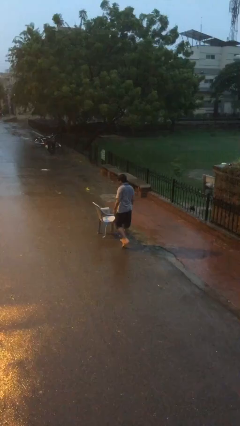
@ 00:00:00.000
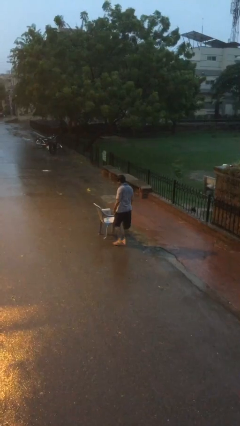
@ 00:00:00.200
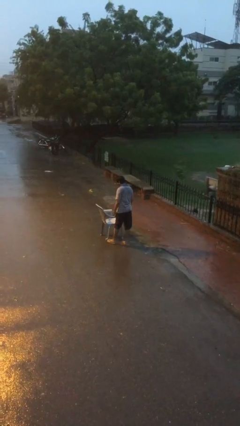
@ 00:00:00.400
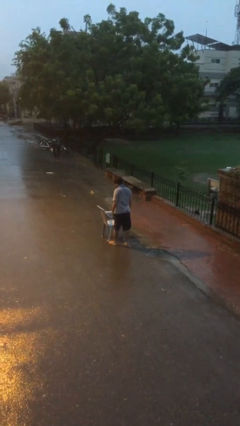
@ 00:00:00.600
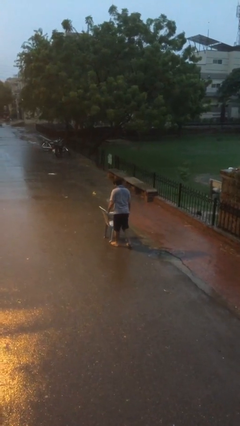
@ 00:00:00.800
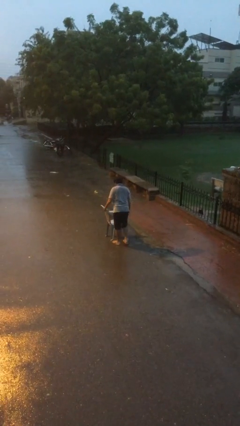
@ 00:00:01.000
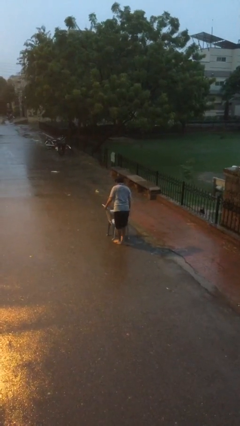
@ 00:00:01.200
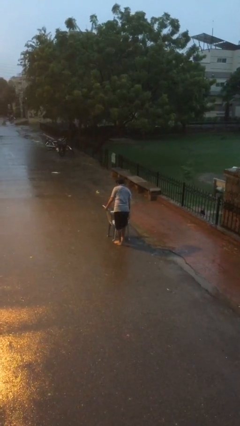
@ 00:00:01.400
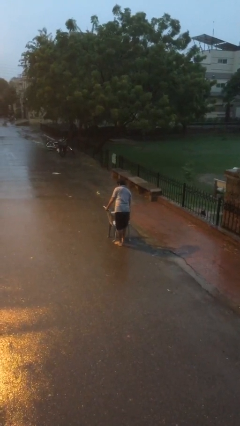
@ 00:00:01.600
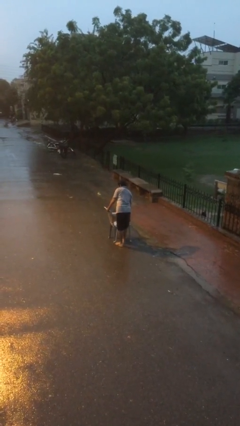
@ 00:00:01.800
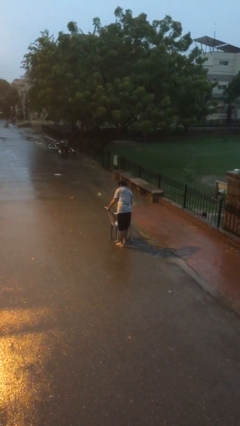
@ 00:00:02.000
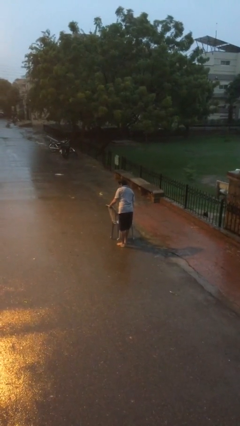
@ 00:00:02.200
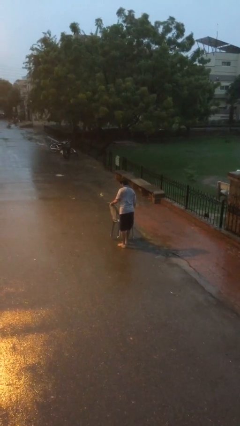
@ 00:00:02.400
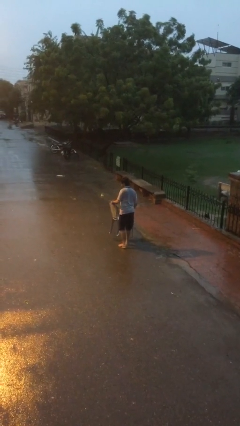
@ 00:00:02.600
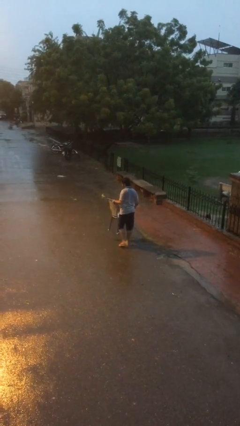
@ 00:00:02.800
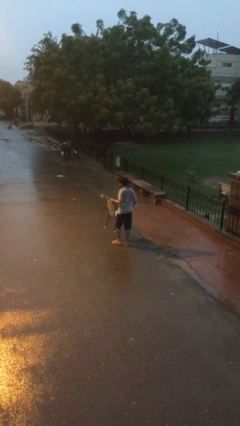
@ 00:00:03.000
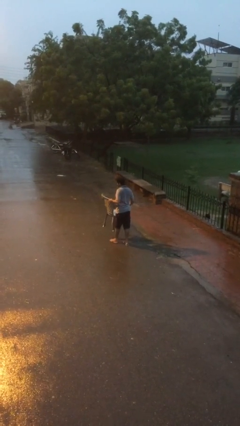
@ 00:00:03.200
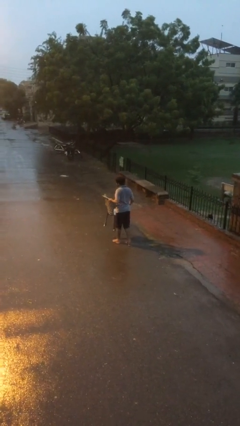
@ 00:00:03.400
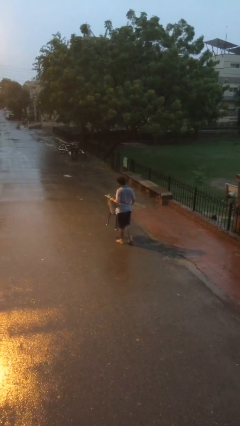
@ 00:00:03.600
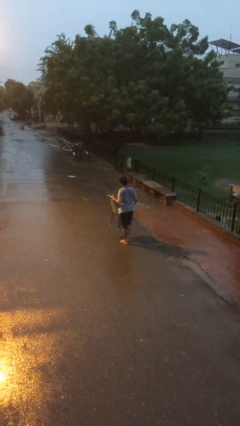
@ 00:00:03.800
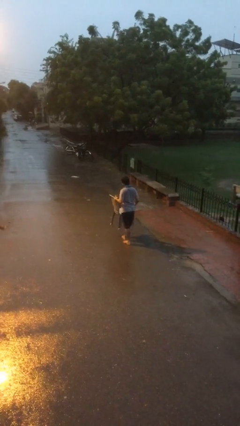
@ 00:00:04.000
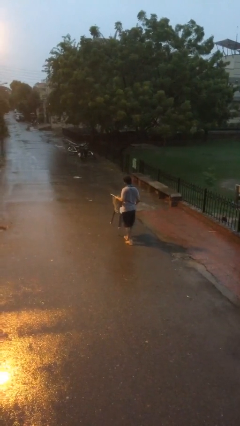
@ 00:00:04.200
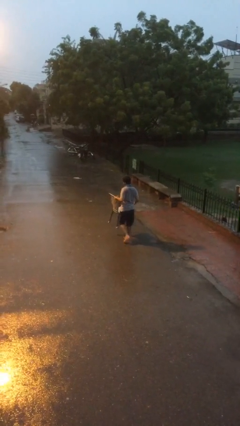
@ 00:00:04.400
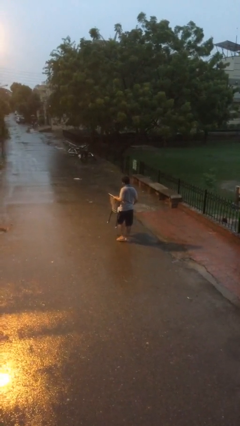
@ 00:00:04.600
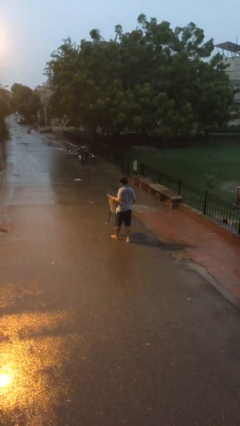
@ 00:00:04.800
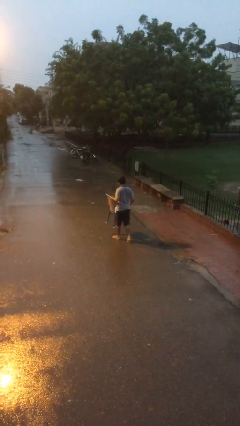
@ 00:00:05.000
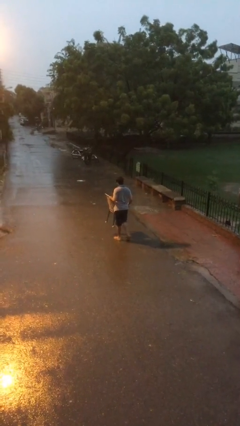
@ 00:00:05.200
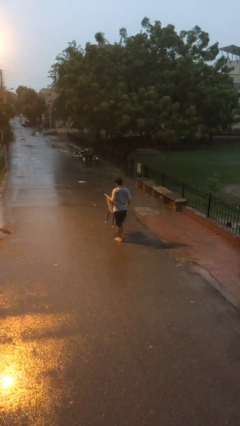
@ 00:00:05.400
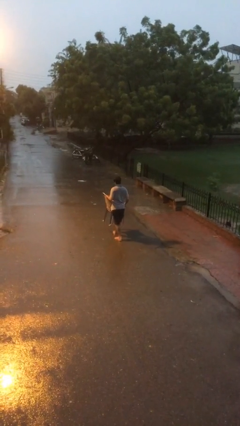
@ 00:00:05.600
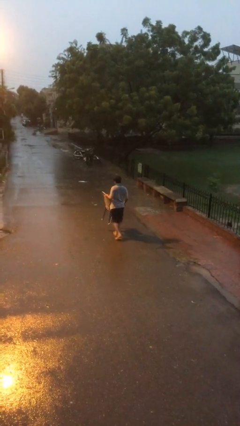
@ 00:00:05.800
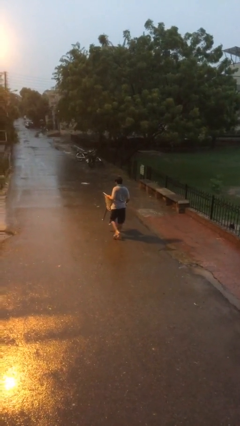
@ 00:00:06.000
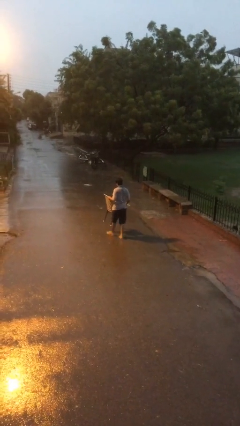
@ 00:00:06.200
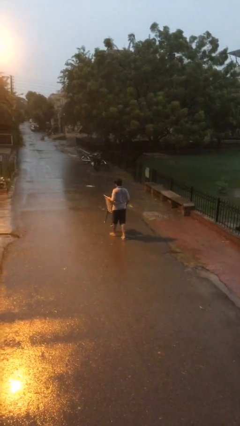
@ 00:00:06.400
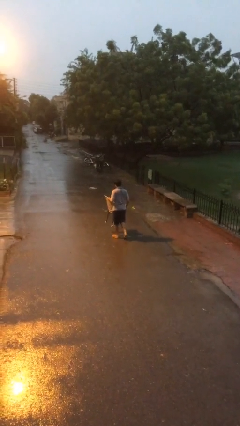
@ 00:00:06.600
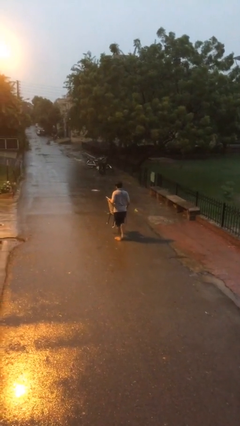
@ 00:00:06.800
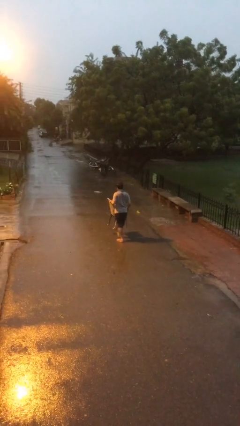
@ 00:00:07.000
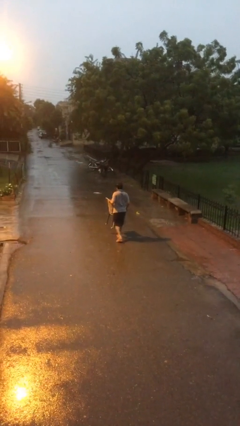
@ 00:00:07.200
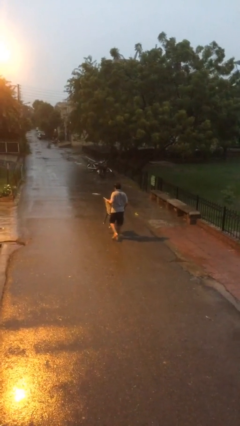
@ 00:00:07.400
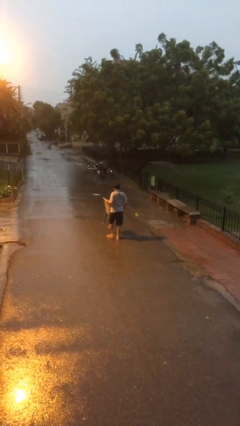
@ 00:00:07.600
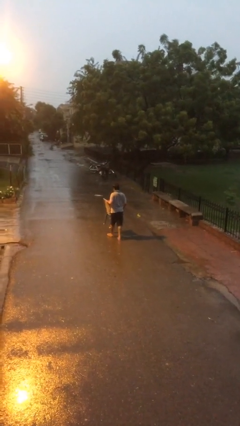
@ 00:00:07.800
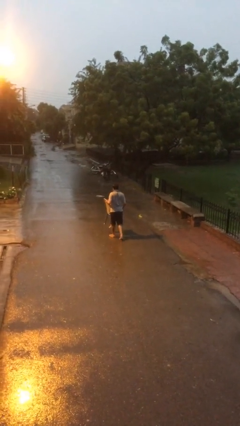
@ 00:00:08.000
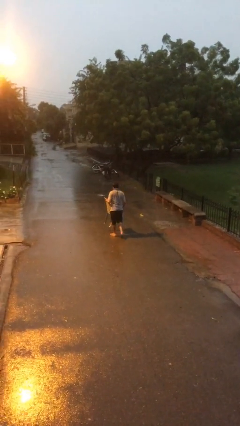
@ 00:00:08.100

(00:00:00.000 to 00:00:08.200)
person carries heavy object

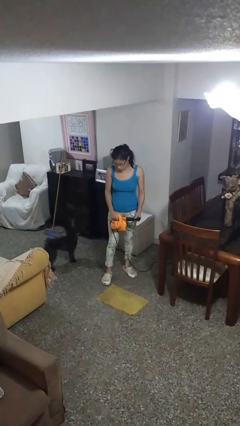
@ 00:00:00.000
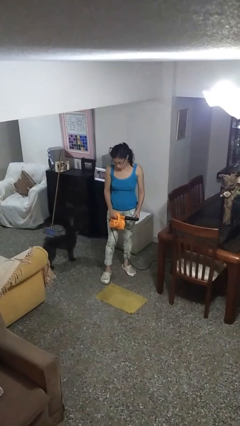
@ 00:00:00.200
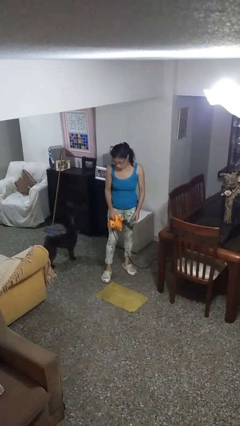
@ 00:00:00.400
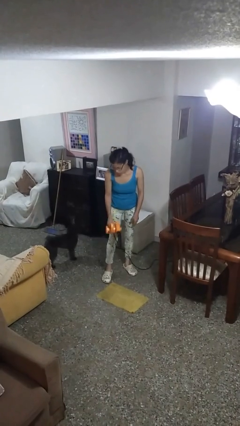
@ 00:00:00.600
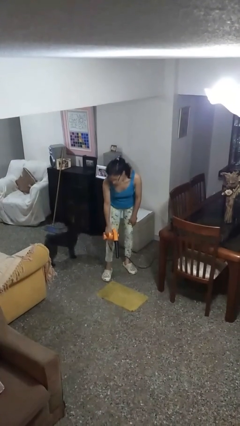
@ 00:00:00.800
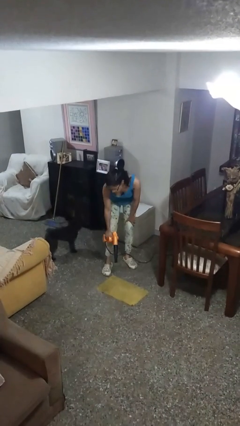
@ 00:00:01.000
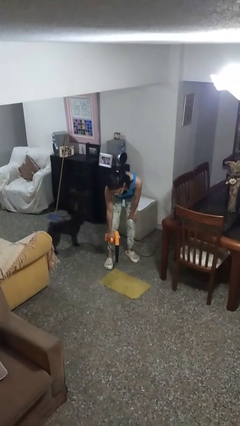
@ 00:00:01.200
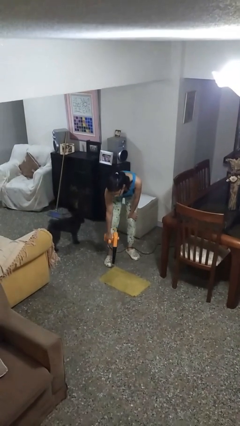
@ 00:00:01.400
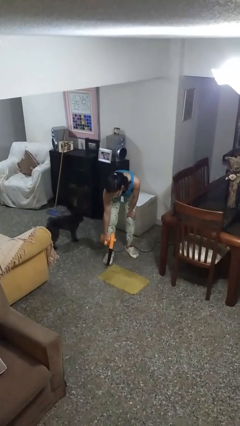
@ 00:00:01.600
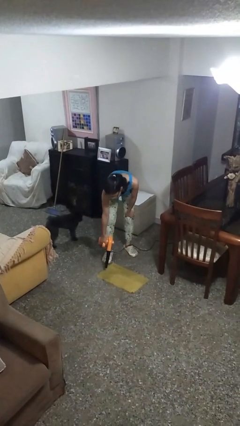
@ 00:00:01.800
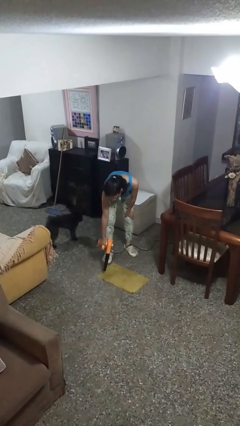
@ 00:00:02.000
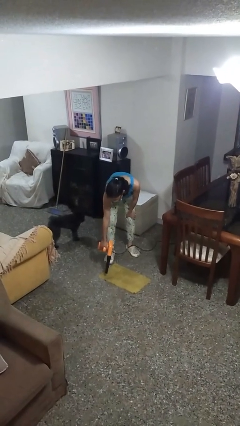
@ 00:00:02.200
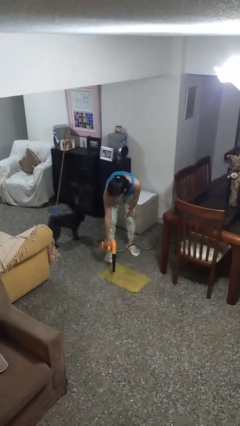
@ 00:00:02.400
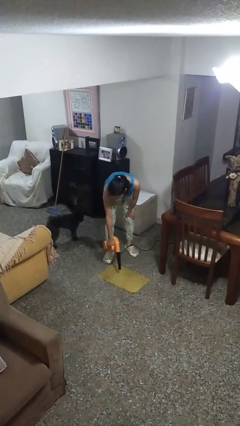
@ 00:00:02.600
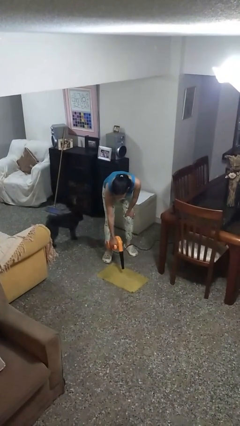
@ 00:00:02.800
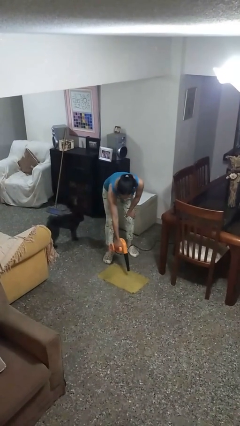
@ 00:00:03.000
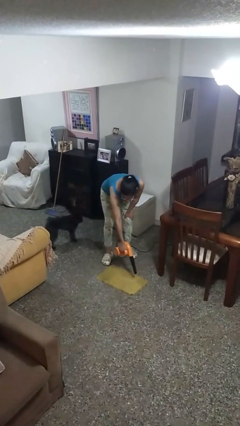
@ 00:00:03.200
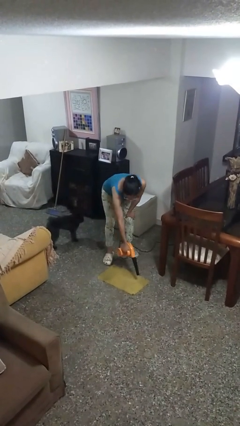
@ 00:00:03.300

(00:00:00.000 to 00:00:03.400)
person vacuums carpet

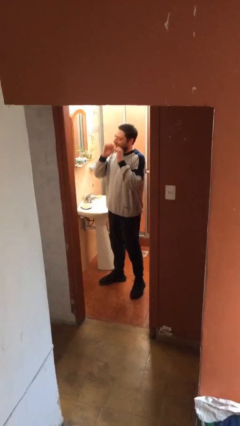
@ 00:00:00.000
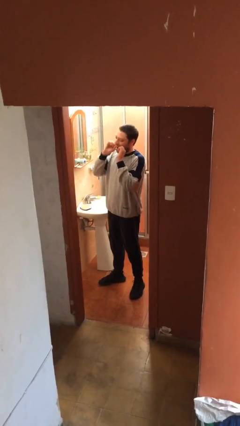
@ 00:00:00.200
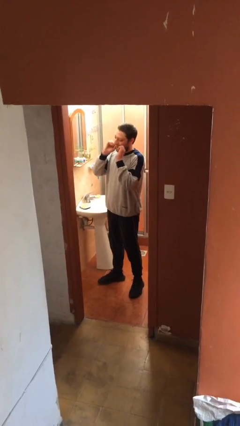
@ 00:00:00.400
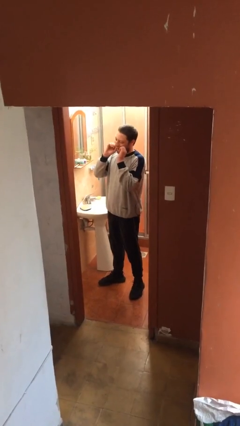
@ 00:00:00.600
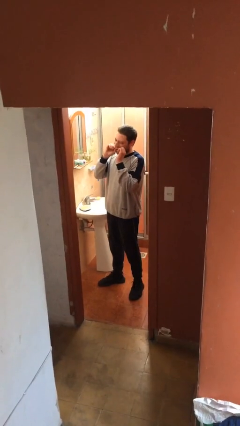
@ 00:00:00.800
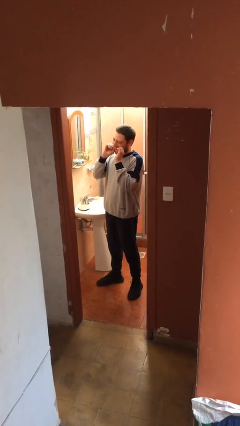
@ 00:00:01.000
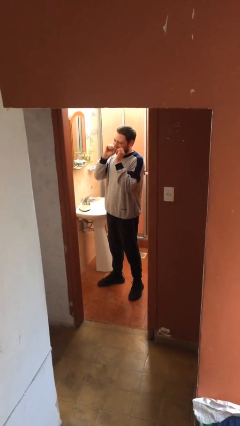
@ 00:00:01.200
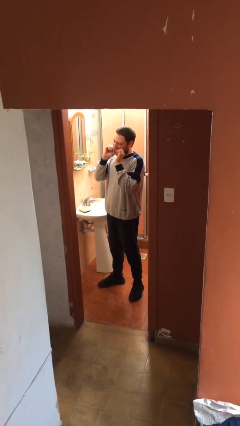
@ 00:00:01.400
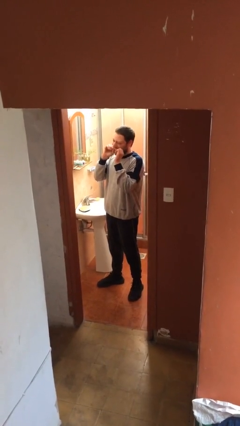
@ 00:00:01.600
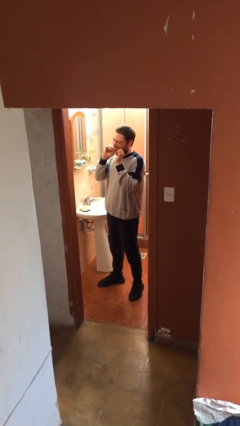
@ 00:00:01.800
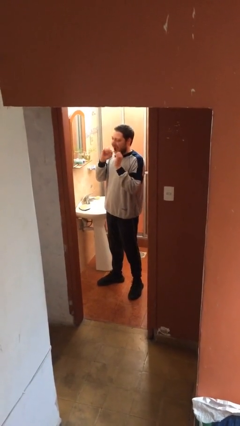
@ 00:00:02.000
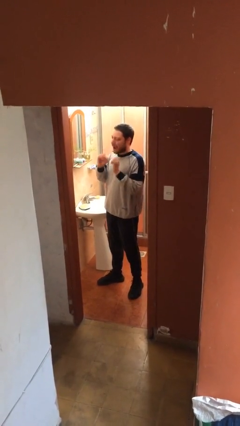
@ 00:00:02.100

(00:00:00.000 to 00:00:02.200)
person flosses

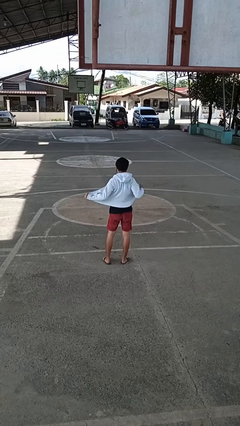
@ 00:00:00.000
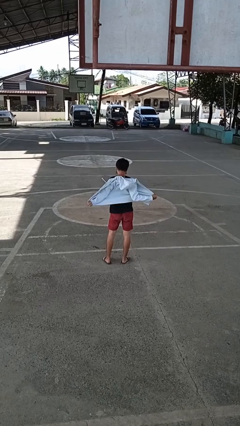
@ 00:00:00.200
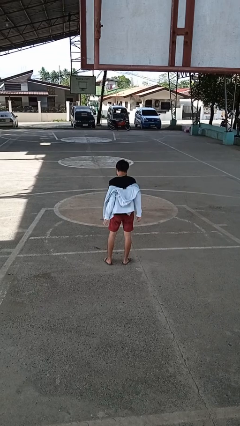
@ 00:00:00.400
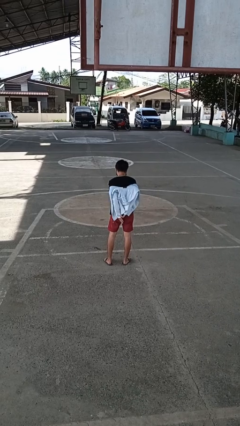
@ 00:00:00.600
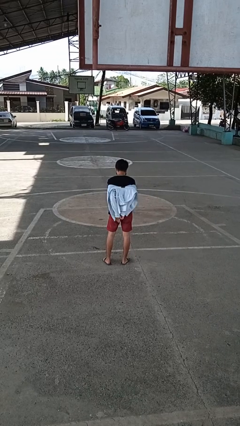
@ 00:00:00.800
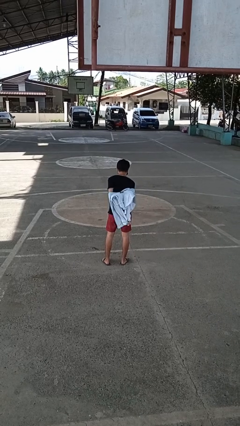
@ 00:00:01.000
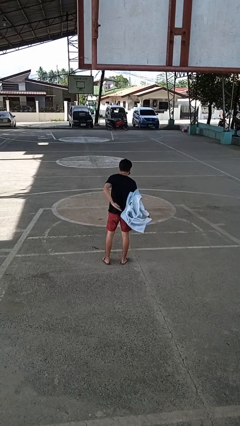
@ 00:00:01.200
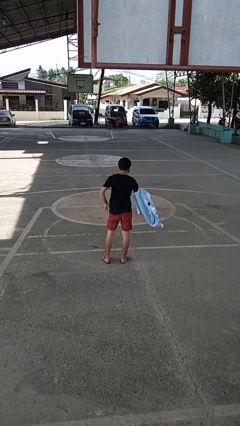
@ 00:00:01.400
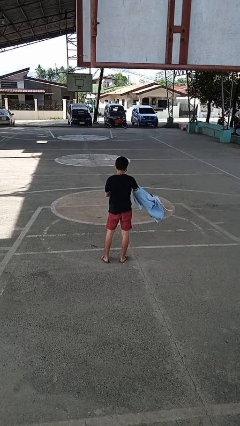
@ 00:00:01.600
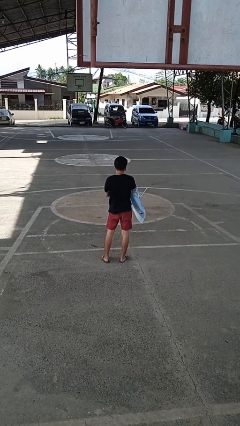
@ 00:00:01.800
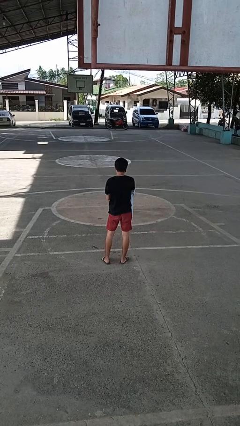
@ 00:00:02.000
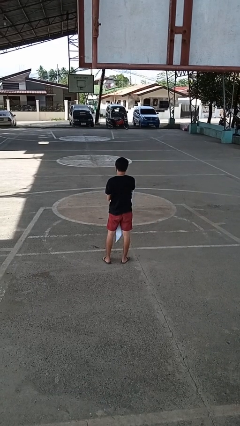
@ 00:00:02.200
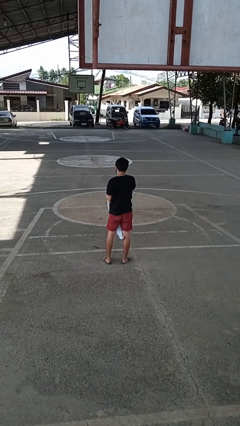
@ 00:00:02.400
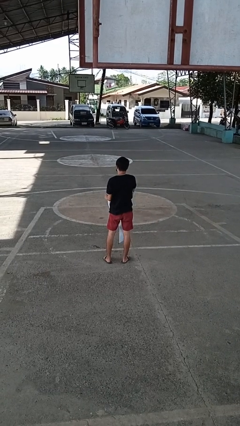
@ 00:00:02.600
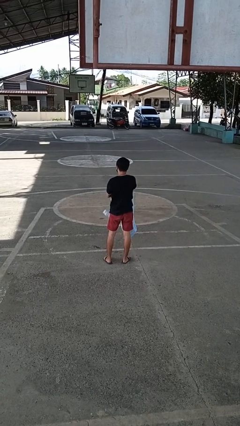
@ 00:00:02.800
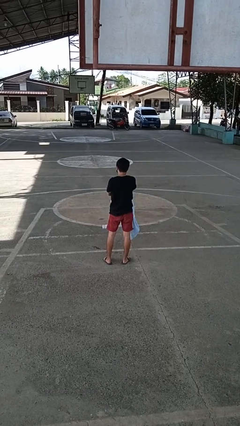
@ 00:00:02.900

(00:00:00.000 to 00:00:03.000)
person takes off jacket

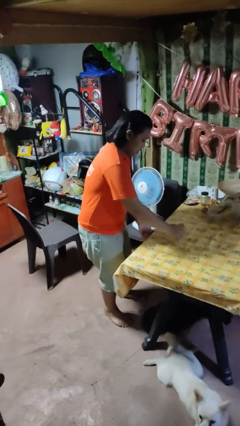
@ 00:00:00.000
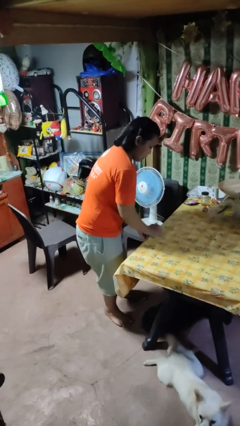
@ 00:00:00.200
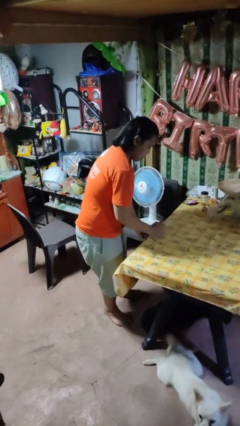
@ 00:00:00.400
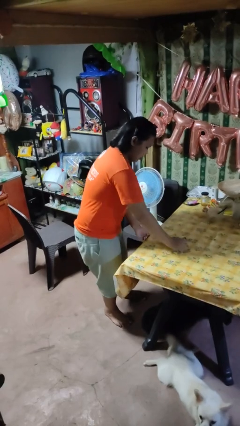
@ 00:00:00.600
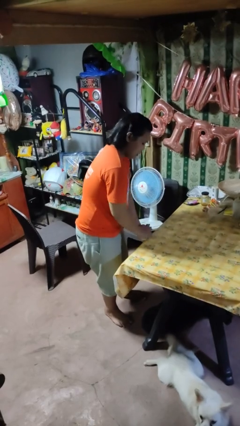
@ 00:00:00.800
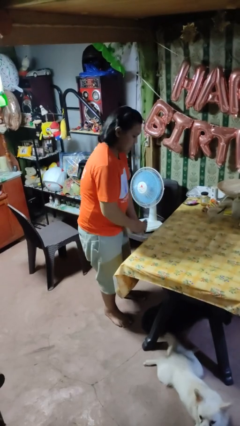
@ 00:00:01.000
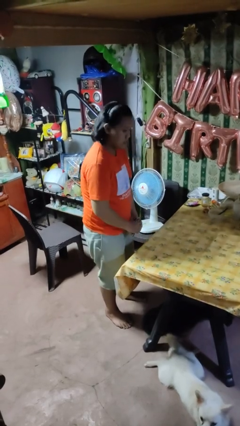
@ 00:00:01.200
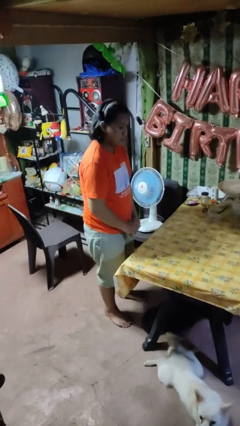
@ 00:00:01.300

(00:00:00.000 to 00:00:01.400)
person cleans table with rag
